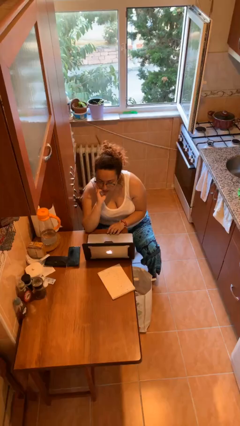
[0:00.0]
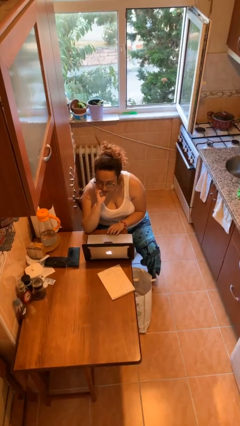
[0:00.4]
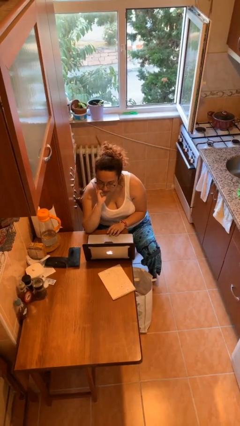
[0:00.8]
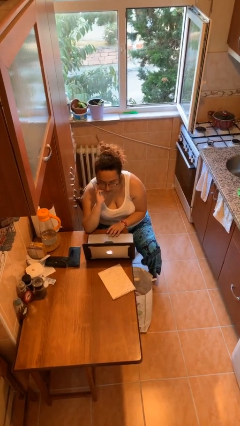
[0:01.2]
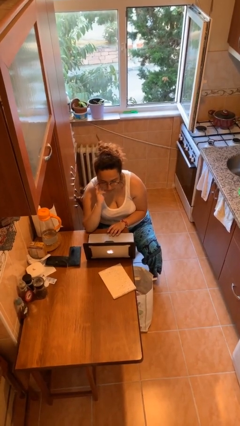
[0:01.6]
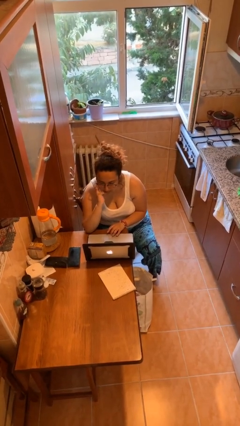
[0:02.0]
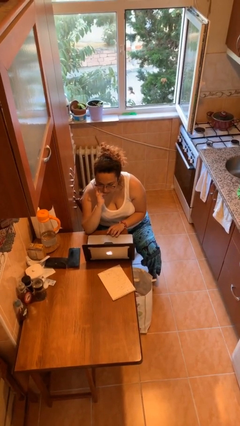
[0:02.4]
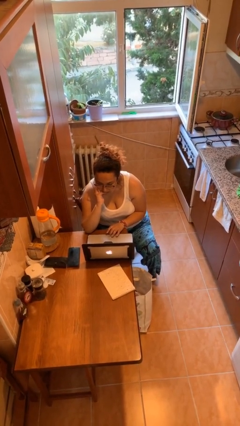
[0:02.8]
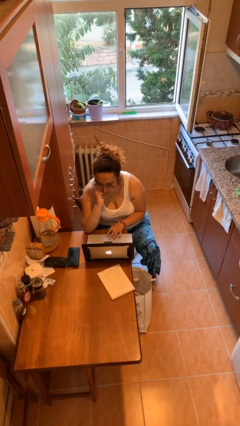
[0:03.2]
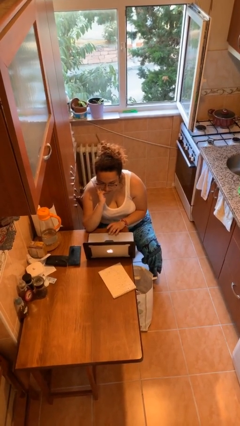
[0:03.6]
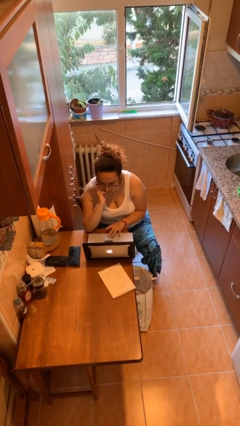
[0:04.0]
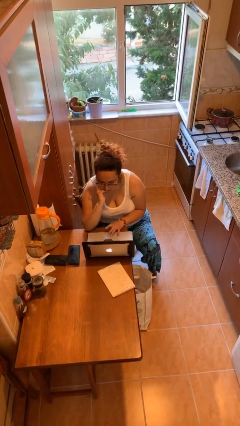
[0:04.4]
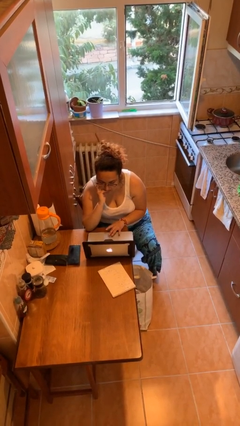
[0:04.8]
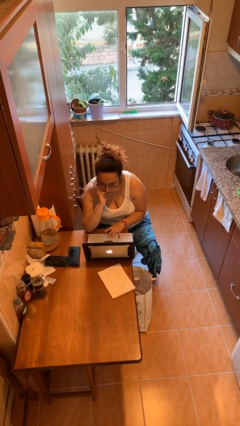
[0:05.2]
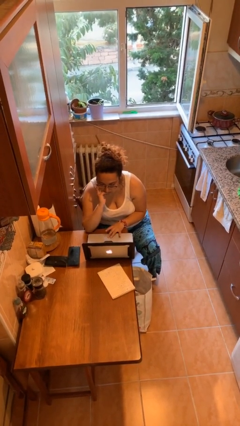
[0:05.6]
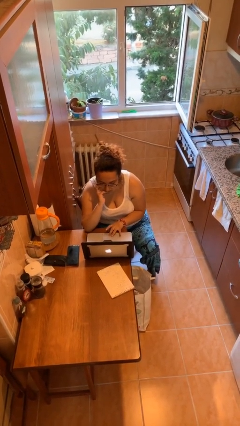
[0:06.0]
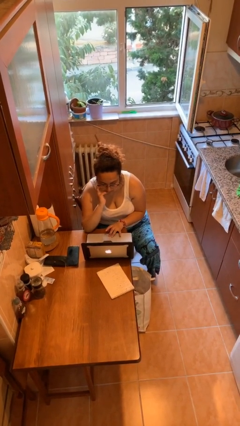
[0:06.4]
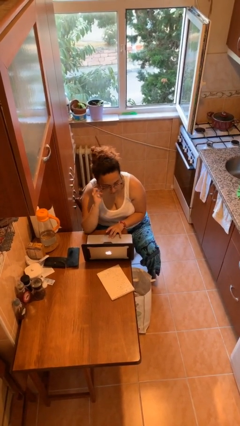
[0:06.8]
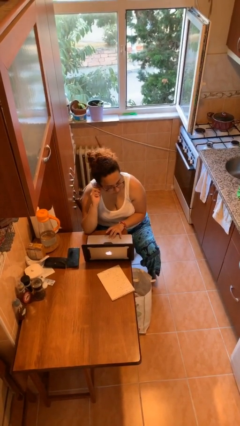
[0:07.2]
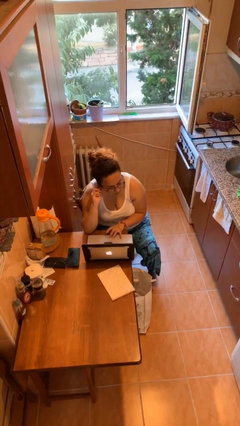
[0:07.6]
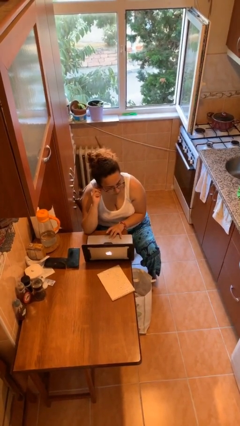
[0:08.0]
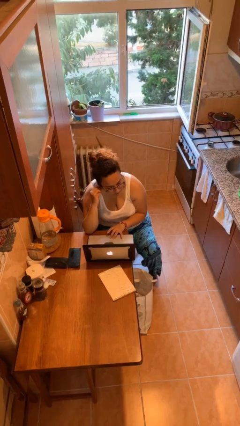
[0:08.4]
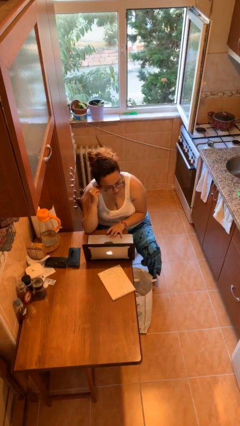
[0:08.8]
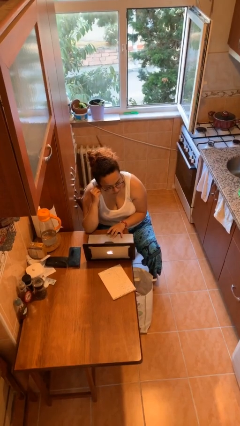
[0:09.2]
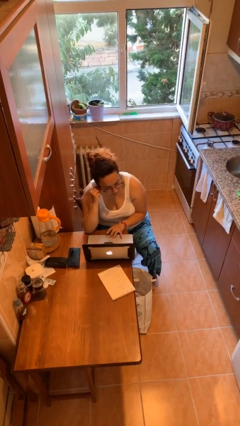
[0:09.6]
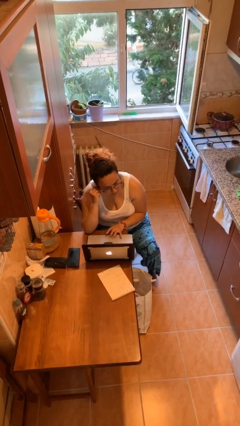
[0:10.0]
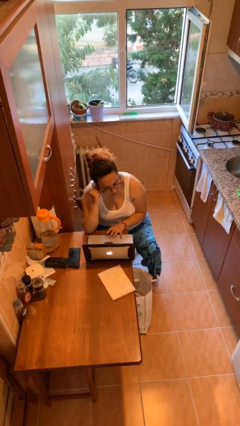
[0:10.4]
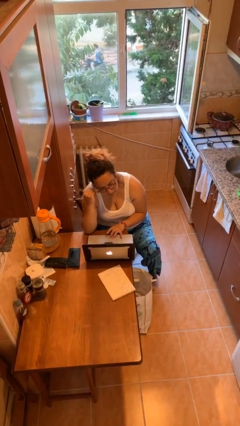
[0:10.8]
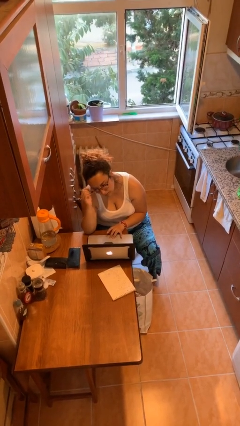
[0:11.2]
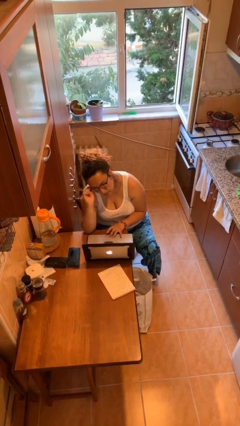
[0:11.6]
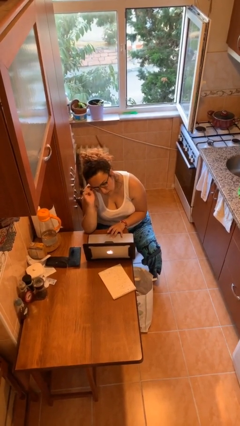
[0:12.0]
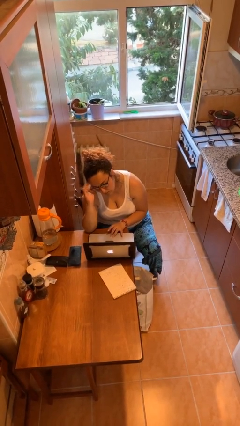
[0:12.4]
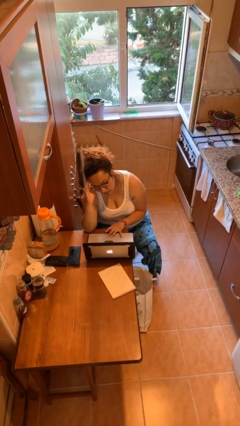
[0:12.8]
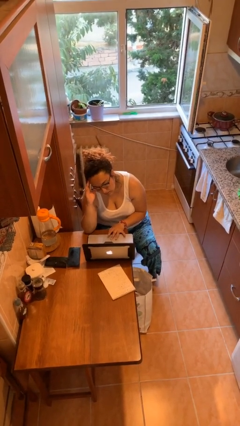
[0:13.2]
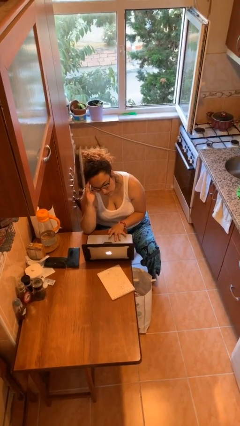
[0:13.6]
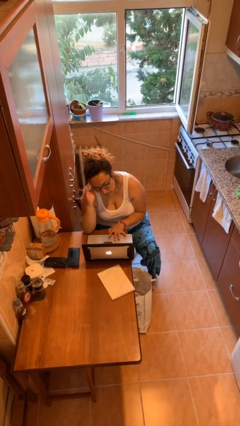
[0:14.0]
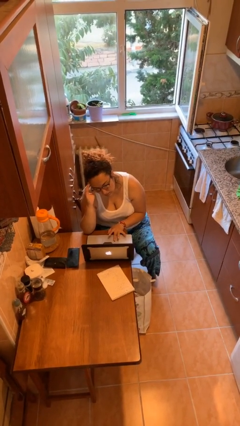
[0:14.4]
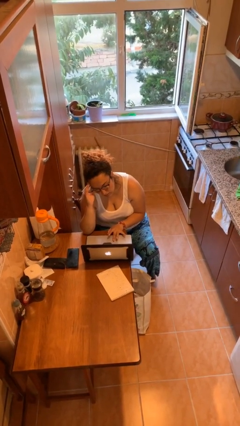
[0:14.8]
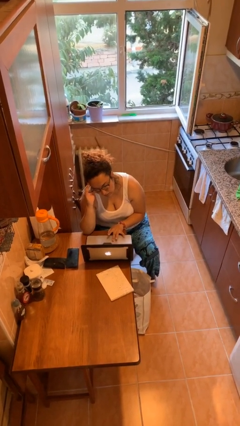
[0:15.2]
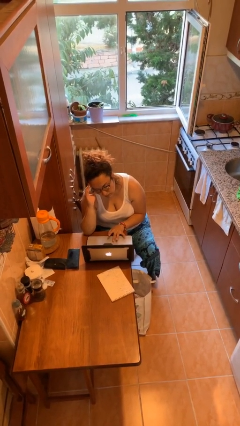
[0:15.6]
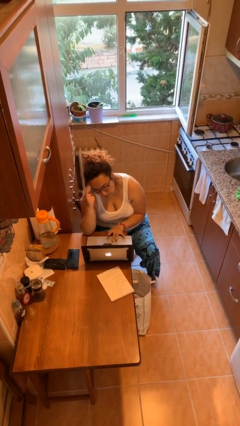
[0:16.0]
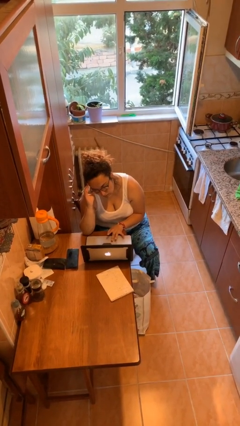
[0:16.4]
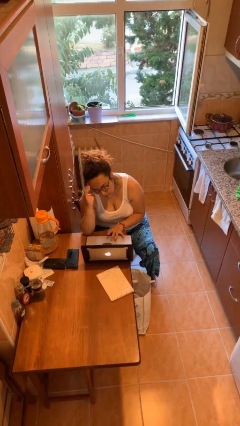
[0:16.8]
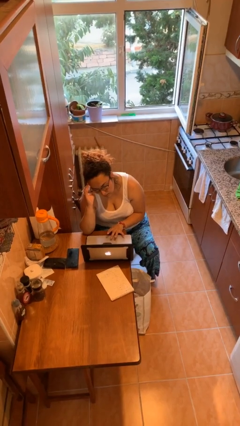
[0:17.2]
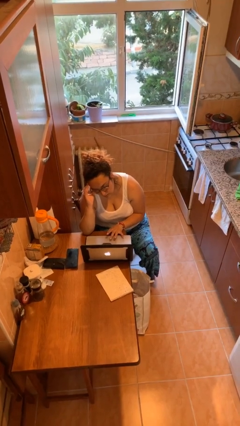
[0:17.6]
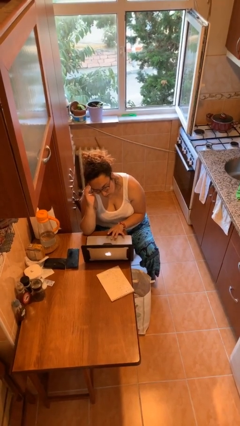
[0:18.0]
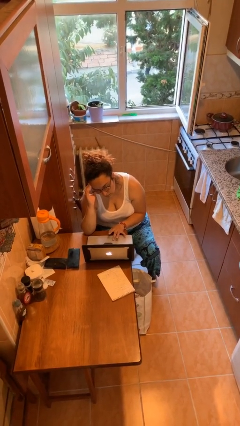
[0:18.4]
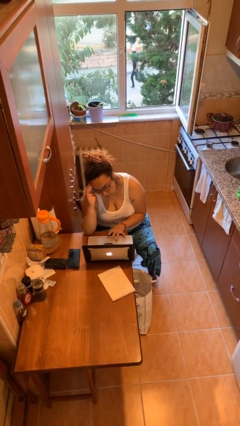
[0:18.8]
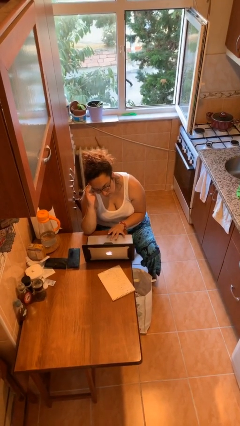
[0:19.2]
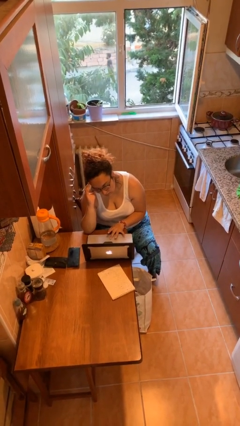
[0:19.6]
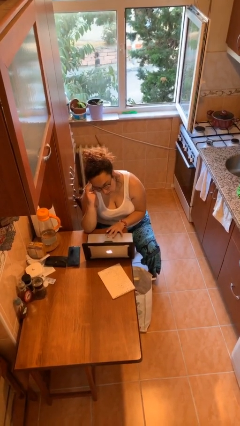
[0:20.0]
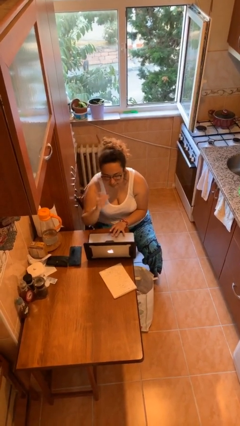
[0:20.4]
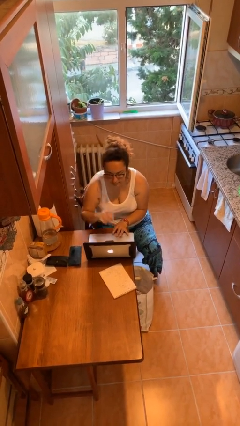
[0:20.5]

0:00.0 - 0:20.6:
person interacts with laptop

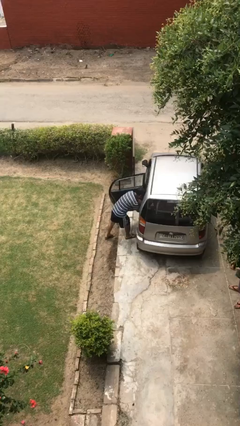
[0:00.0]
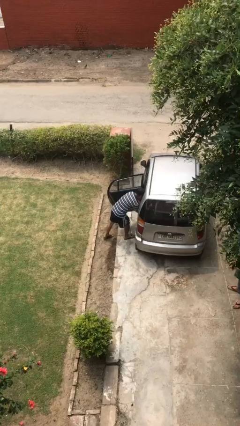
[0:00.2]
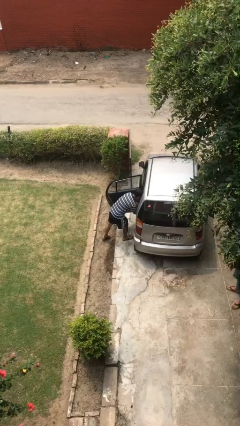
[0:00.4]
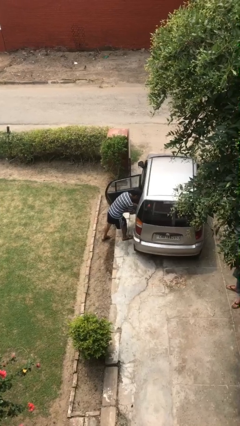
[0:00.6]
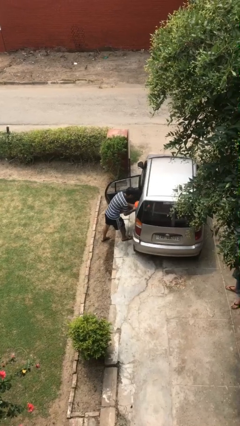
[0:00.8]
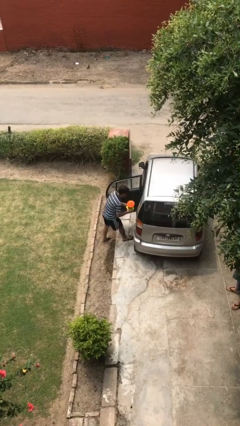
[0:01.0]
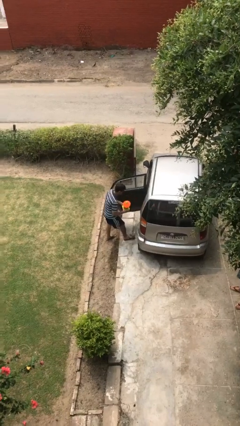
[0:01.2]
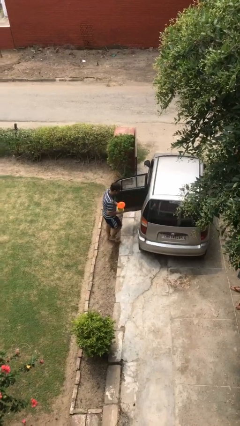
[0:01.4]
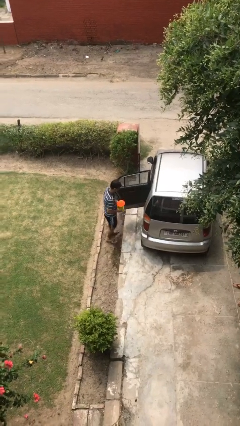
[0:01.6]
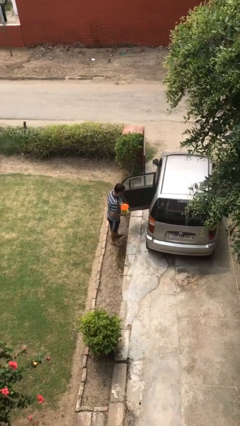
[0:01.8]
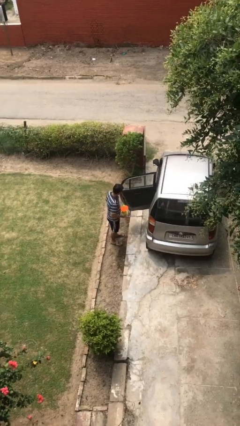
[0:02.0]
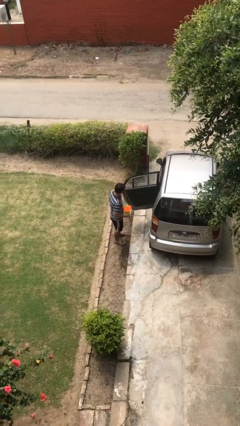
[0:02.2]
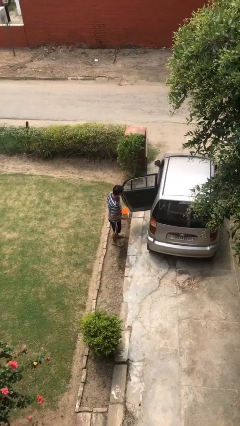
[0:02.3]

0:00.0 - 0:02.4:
person unloads car

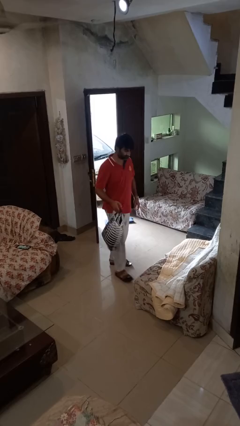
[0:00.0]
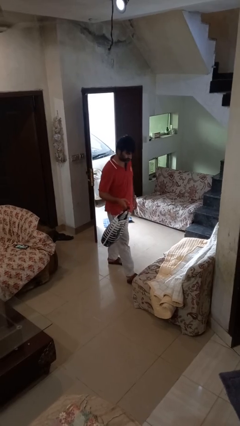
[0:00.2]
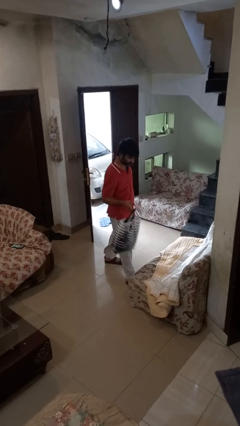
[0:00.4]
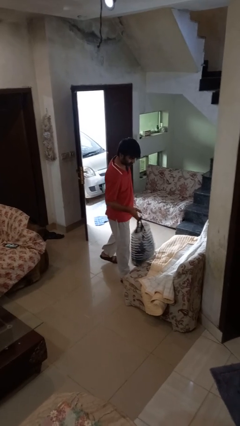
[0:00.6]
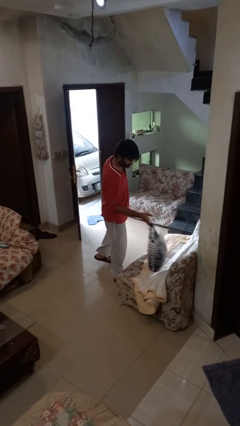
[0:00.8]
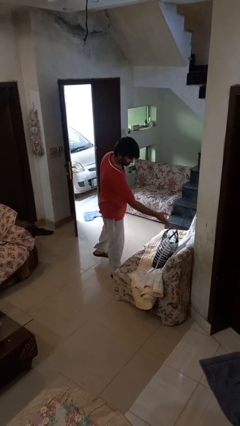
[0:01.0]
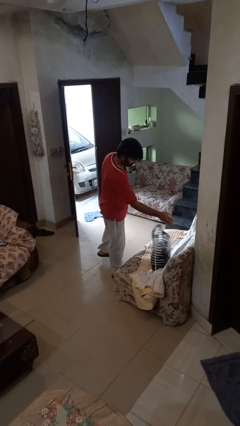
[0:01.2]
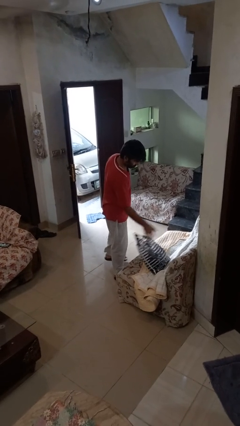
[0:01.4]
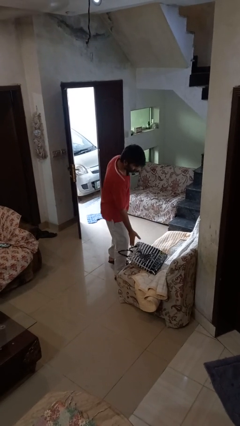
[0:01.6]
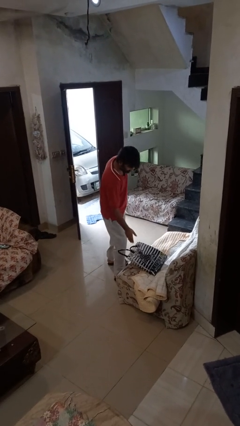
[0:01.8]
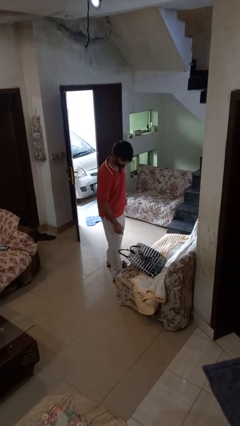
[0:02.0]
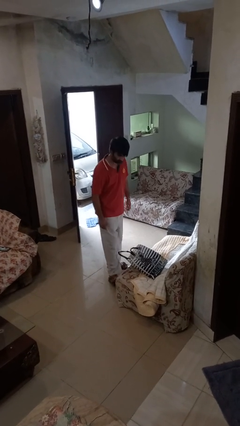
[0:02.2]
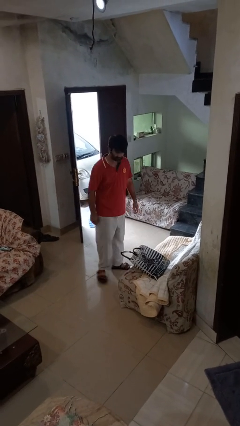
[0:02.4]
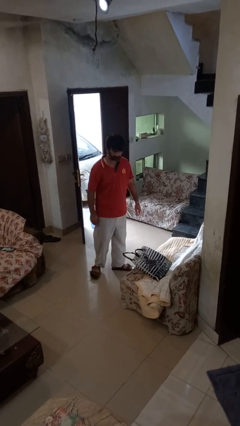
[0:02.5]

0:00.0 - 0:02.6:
person puts down object on couch

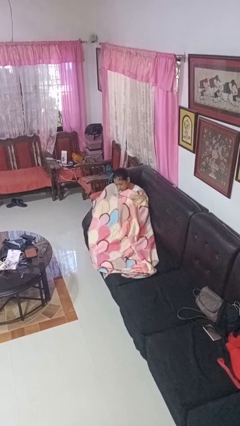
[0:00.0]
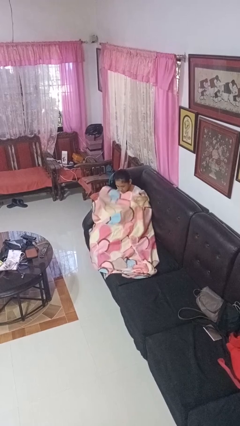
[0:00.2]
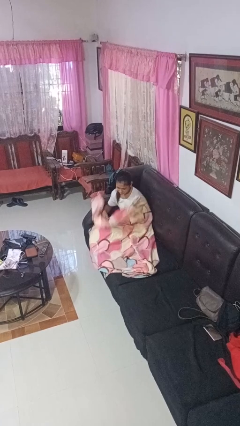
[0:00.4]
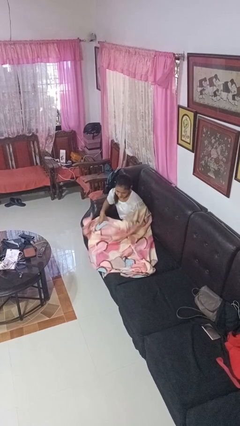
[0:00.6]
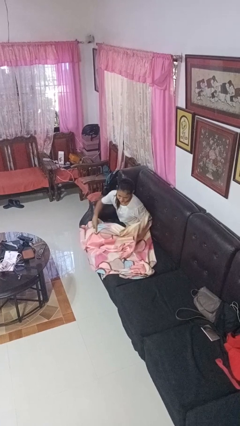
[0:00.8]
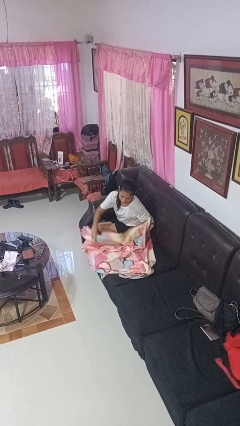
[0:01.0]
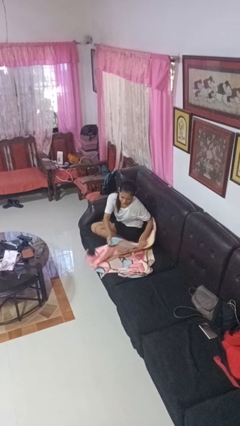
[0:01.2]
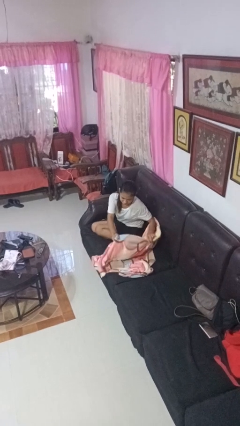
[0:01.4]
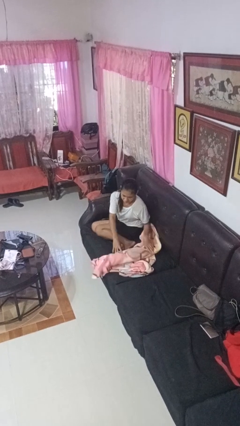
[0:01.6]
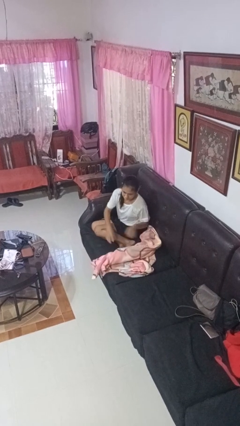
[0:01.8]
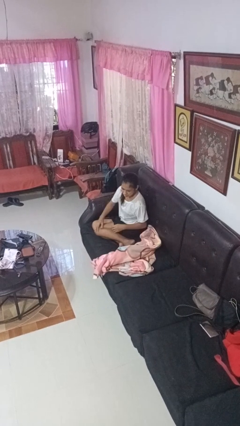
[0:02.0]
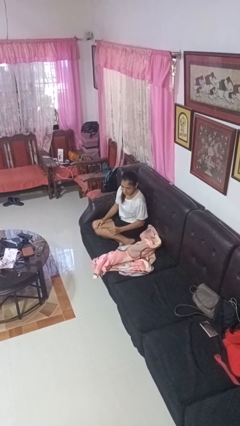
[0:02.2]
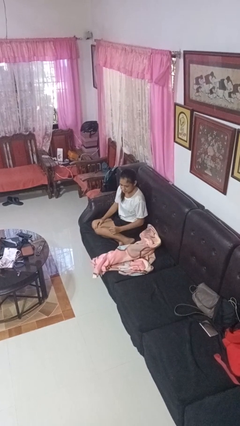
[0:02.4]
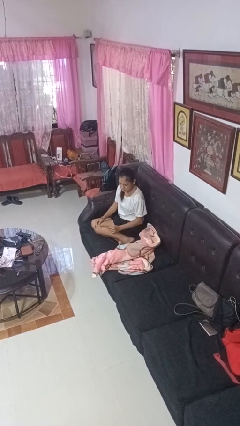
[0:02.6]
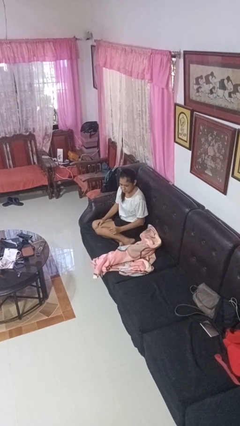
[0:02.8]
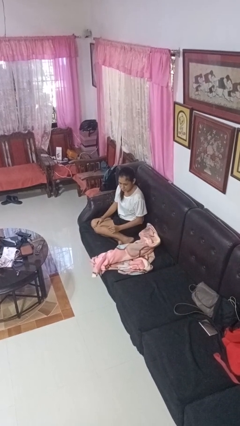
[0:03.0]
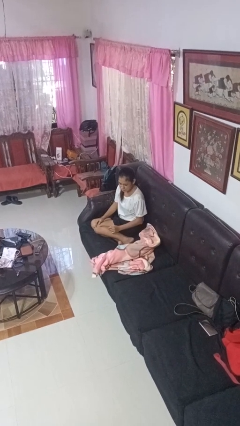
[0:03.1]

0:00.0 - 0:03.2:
person uncovers with blanket
